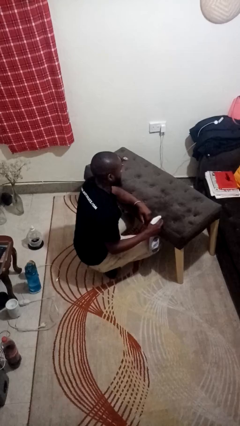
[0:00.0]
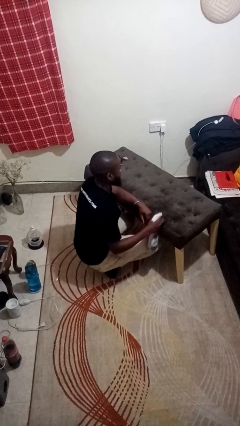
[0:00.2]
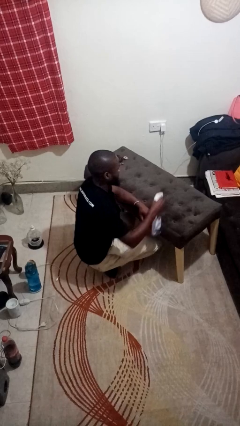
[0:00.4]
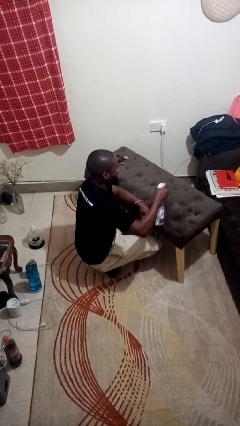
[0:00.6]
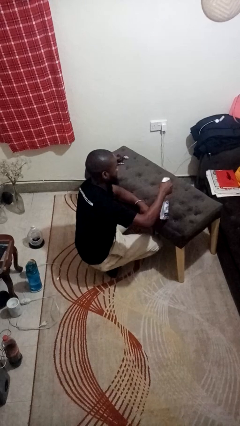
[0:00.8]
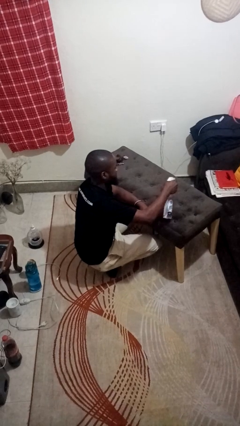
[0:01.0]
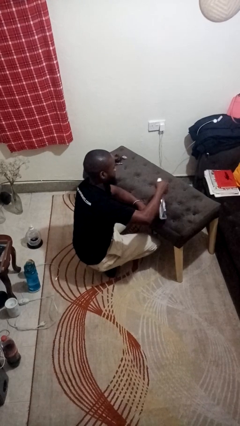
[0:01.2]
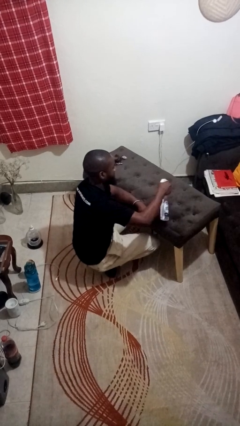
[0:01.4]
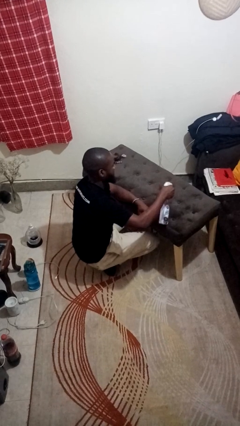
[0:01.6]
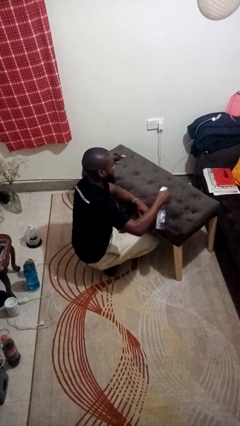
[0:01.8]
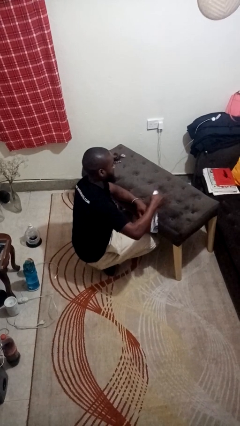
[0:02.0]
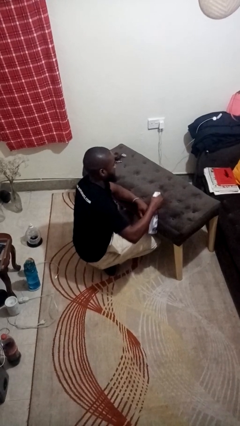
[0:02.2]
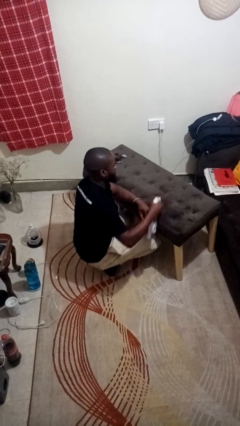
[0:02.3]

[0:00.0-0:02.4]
person sprays from bottle

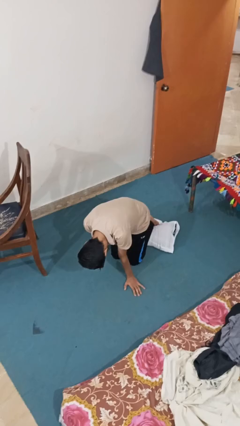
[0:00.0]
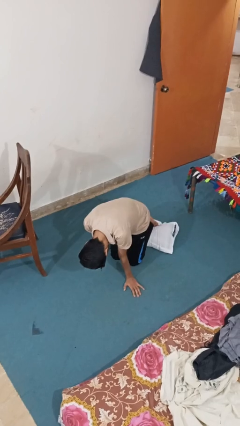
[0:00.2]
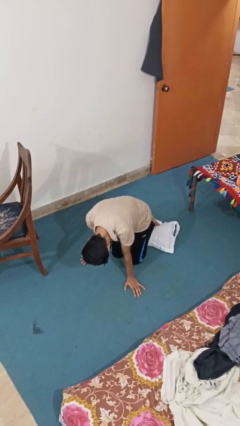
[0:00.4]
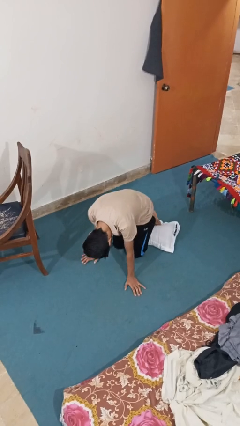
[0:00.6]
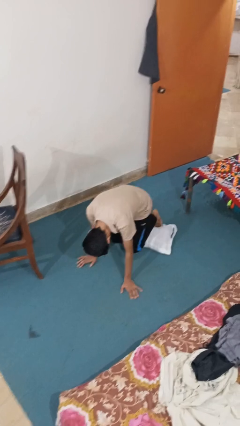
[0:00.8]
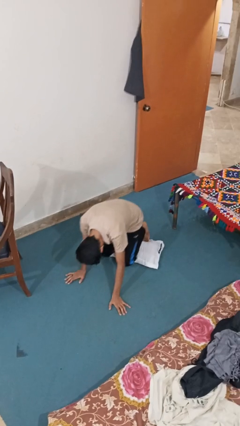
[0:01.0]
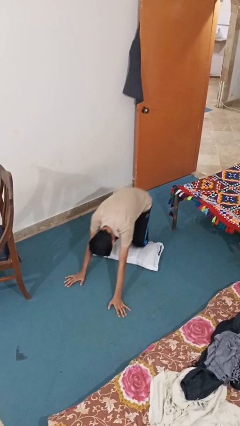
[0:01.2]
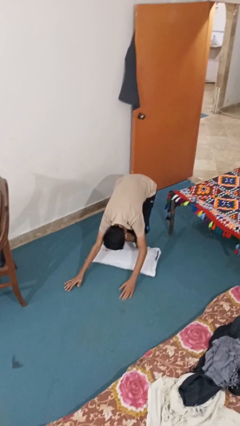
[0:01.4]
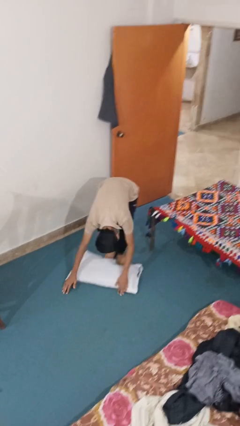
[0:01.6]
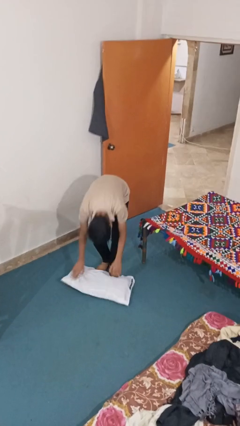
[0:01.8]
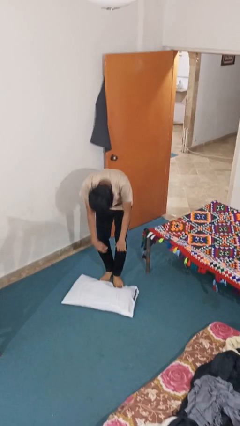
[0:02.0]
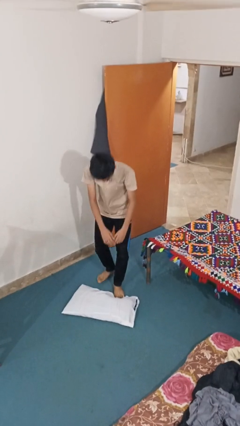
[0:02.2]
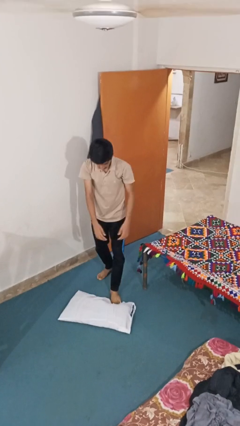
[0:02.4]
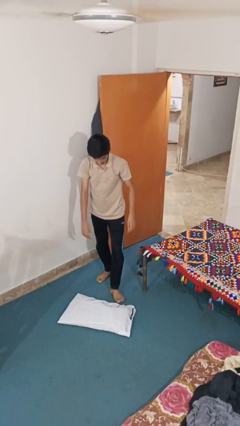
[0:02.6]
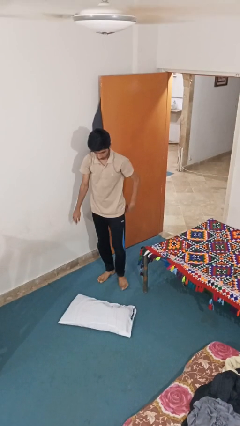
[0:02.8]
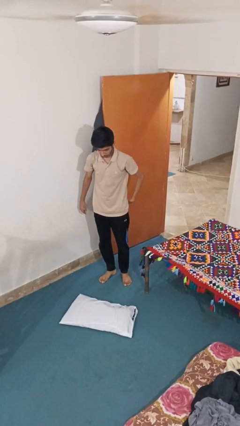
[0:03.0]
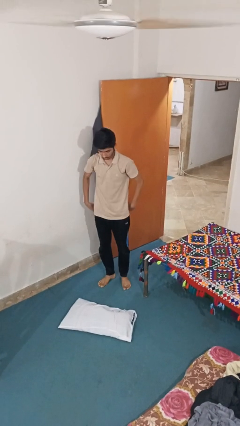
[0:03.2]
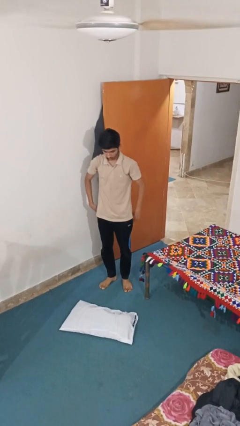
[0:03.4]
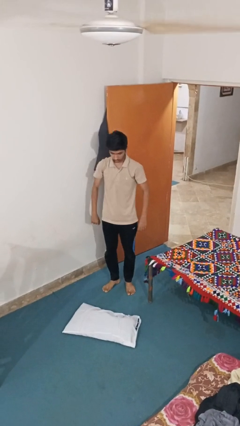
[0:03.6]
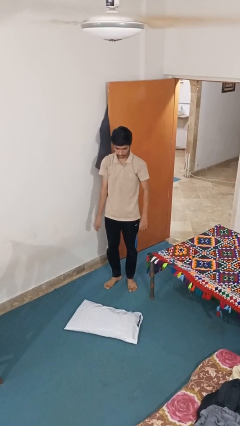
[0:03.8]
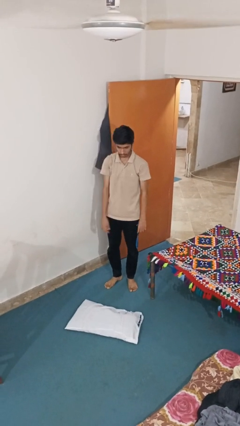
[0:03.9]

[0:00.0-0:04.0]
person stands up from floor

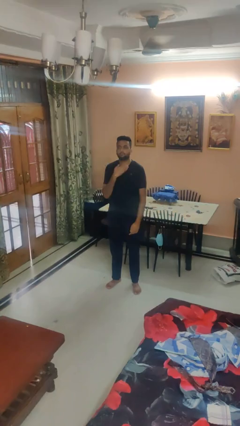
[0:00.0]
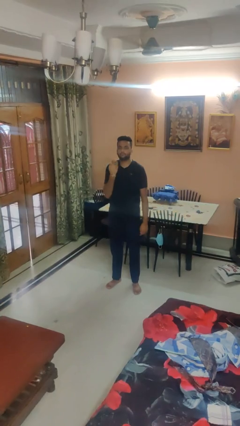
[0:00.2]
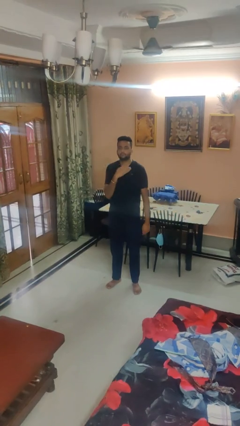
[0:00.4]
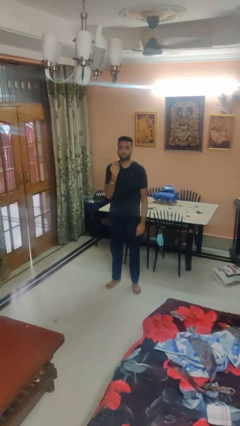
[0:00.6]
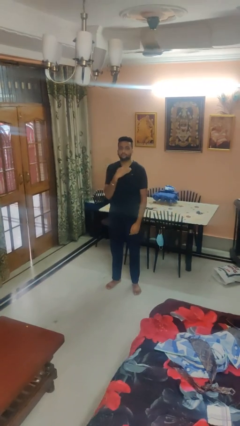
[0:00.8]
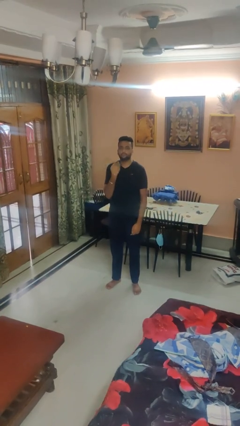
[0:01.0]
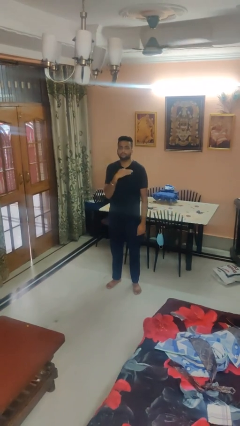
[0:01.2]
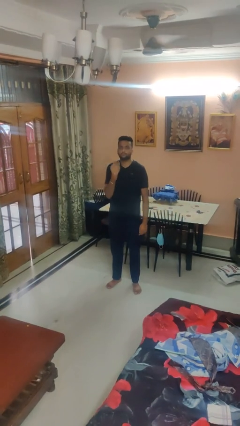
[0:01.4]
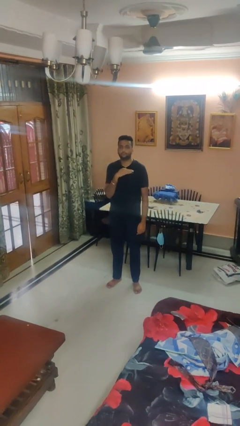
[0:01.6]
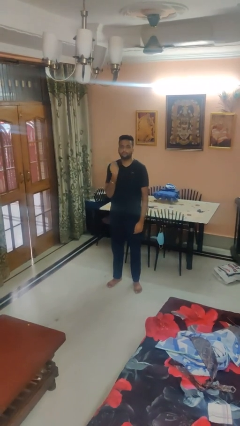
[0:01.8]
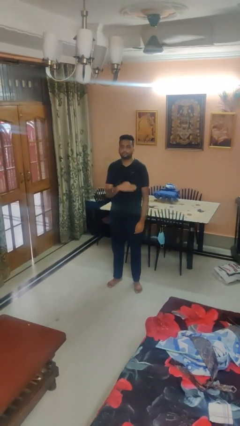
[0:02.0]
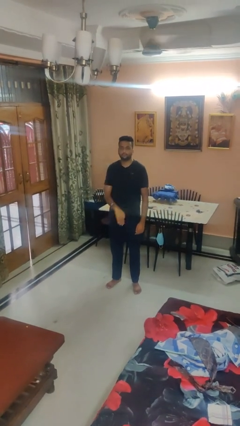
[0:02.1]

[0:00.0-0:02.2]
person gestures cut

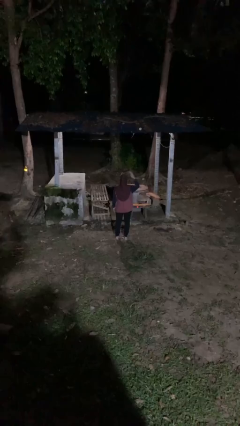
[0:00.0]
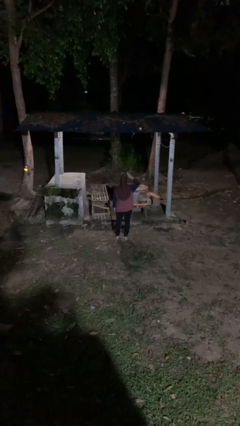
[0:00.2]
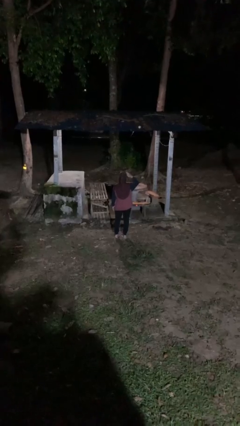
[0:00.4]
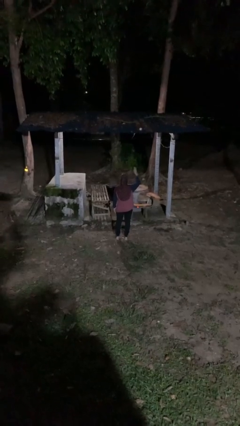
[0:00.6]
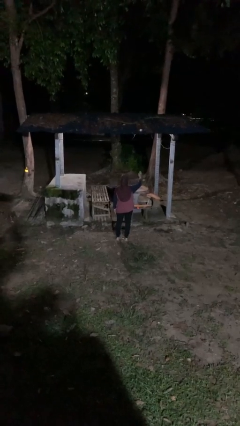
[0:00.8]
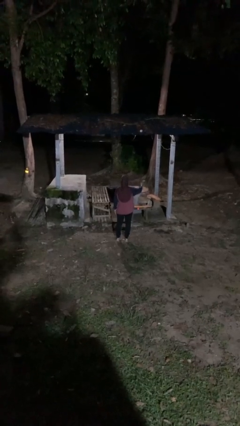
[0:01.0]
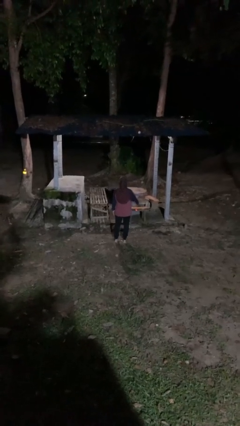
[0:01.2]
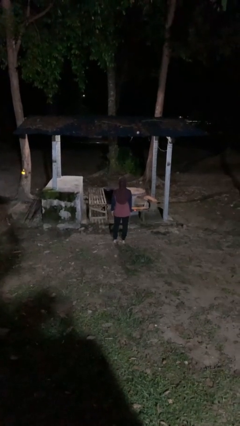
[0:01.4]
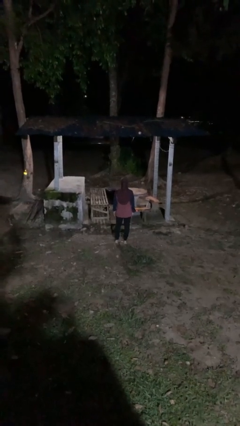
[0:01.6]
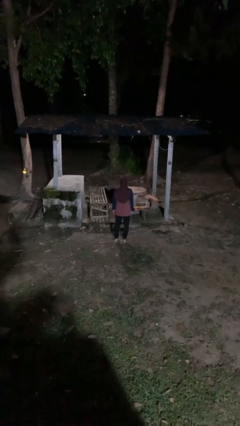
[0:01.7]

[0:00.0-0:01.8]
person salutes

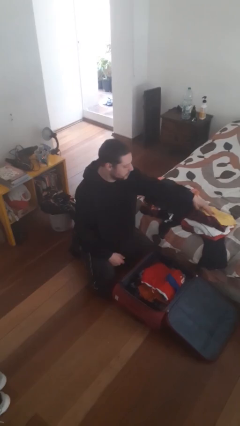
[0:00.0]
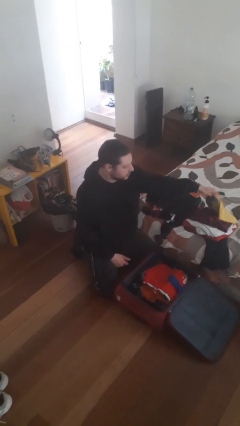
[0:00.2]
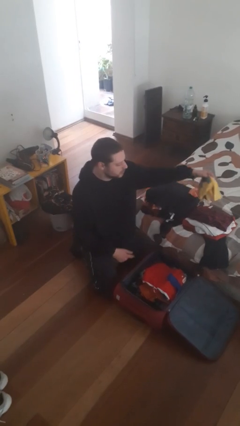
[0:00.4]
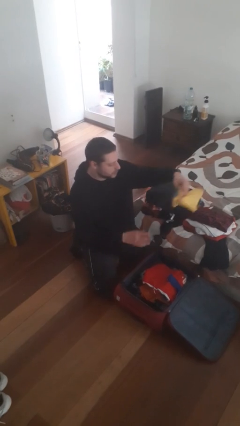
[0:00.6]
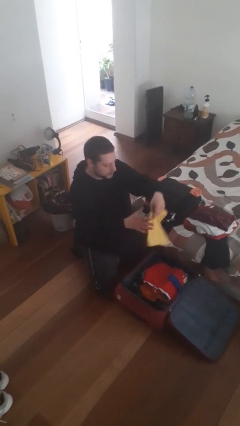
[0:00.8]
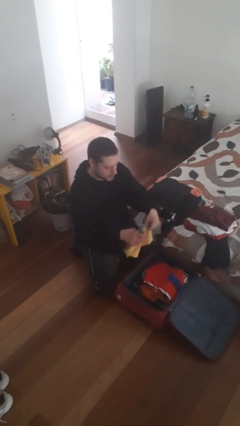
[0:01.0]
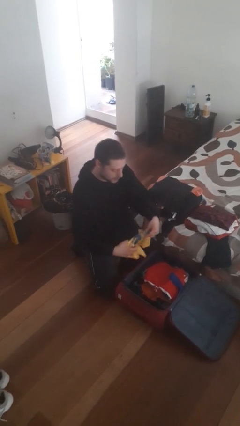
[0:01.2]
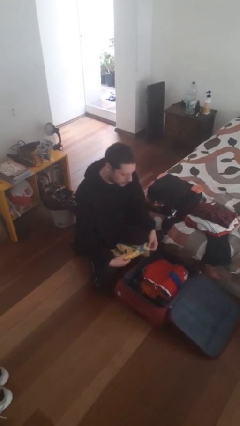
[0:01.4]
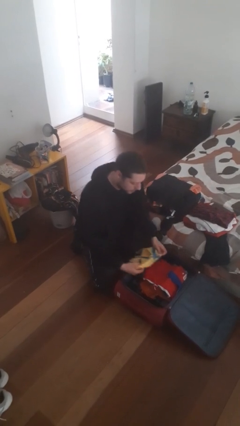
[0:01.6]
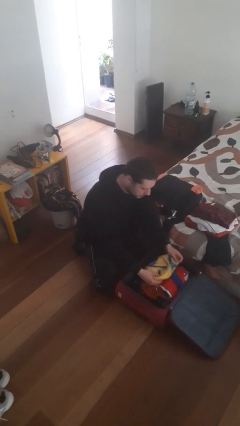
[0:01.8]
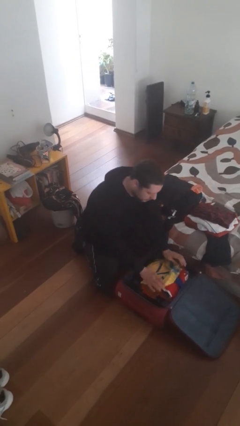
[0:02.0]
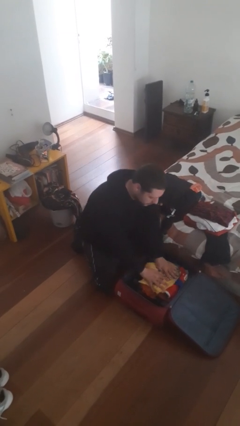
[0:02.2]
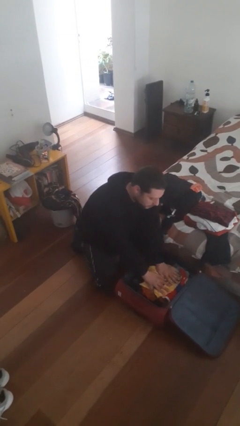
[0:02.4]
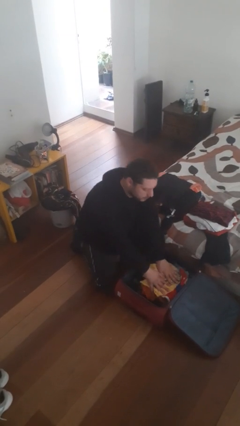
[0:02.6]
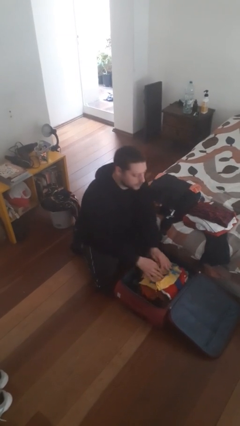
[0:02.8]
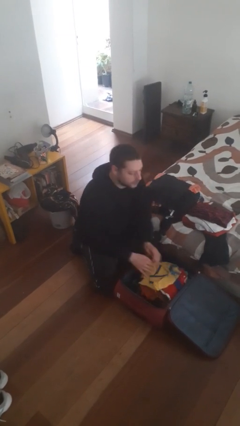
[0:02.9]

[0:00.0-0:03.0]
person loads clothes into suitcase

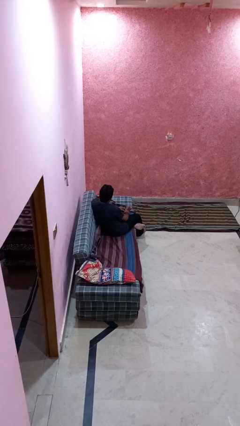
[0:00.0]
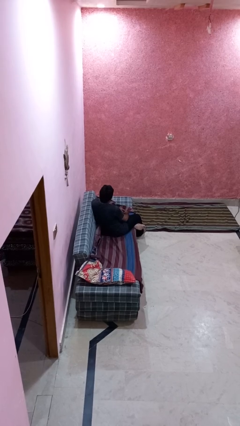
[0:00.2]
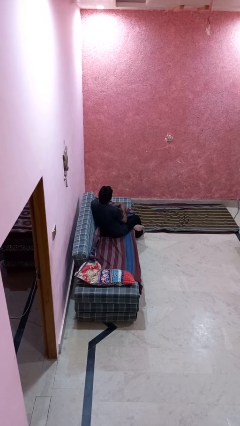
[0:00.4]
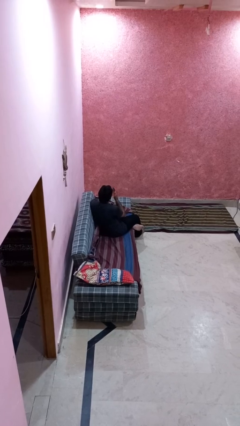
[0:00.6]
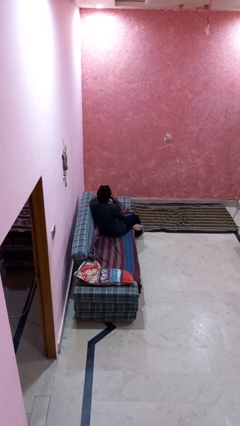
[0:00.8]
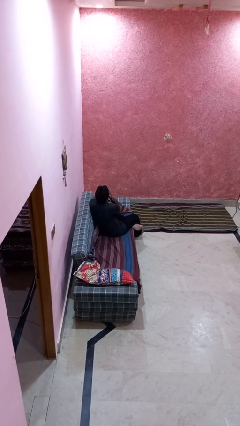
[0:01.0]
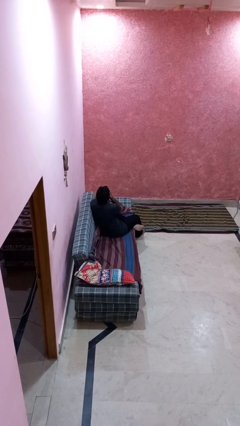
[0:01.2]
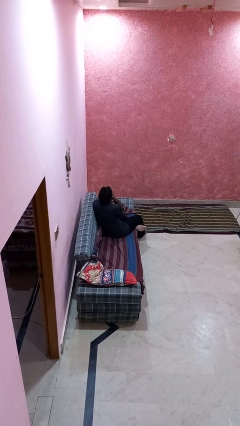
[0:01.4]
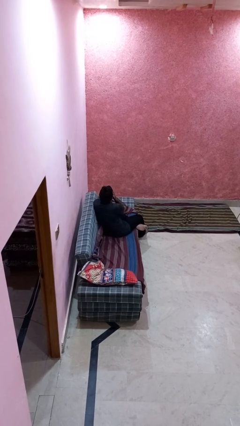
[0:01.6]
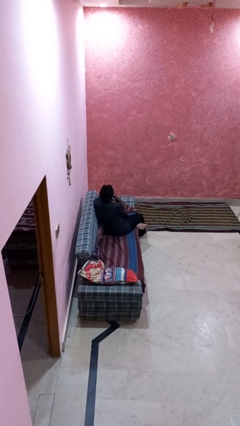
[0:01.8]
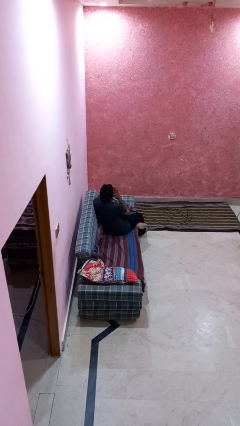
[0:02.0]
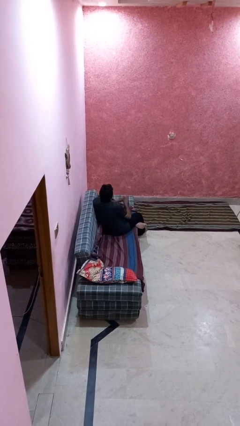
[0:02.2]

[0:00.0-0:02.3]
person covers face with hands

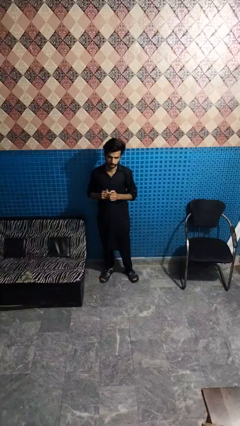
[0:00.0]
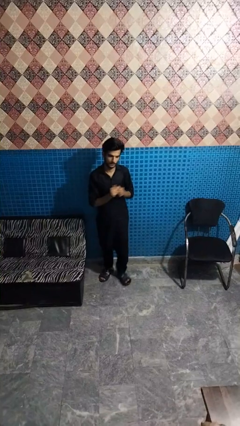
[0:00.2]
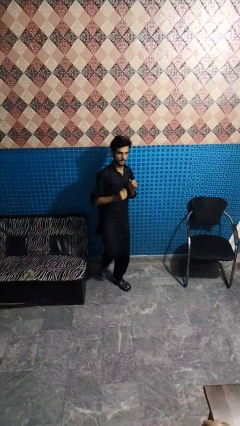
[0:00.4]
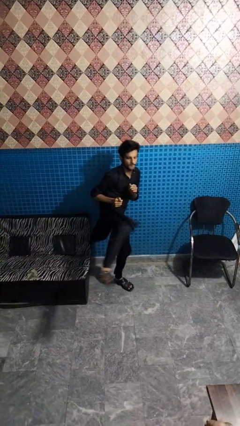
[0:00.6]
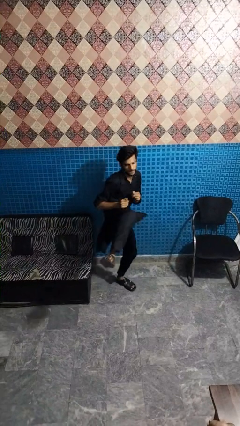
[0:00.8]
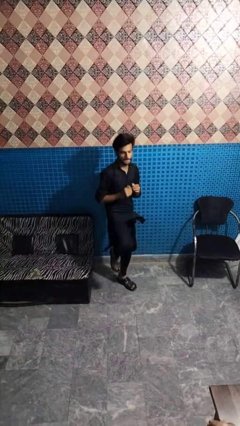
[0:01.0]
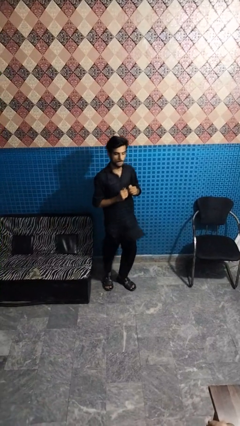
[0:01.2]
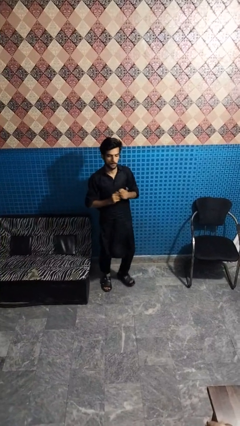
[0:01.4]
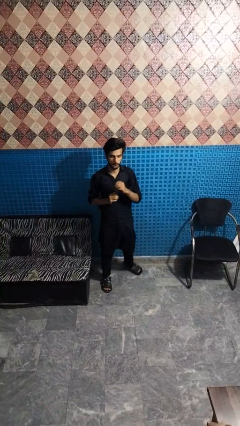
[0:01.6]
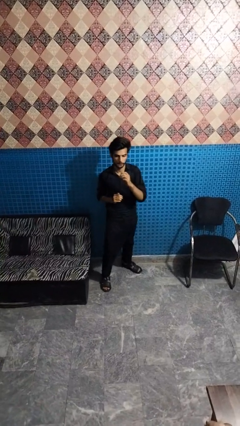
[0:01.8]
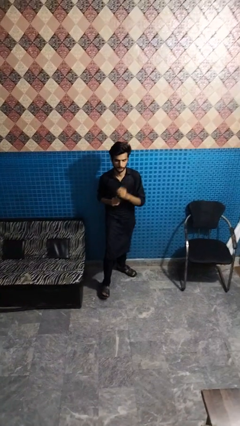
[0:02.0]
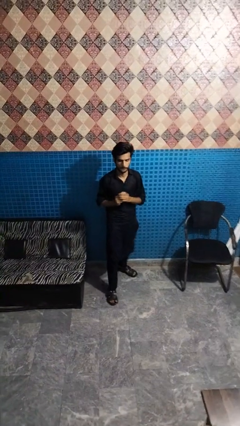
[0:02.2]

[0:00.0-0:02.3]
person karate kicks
